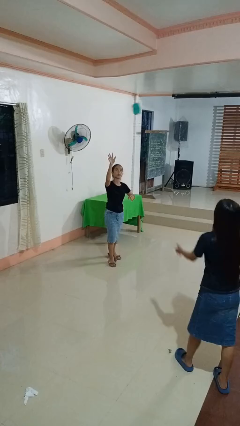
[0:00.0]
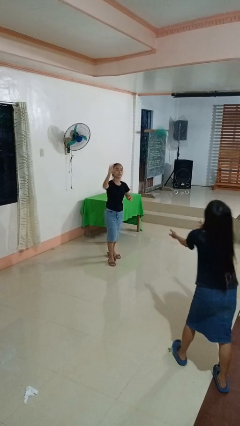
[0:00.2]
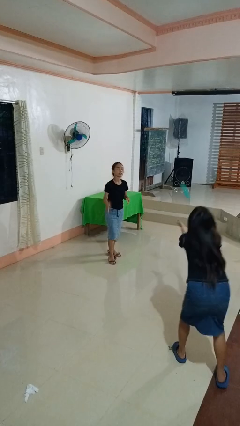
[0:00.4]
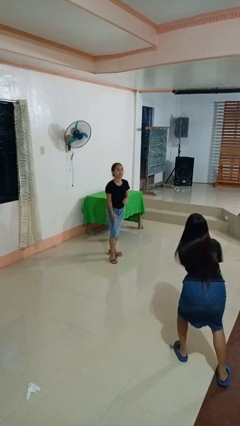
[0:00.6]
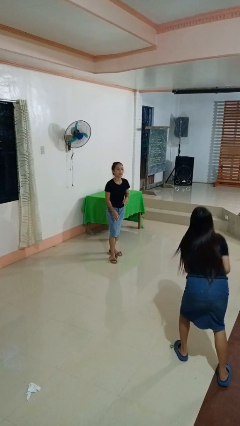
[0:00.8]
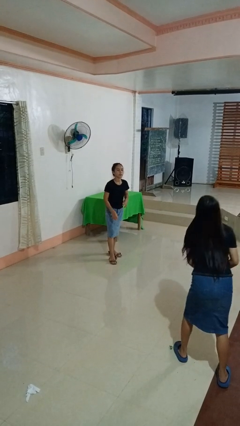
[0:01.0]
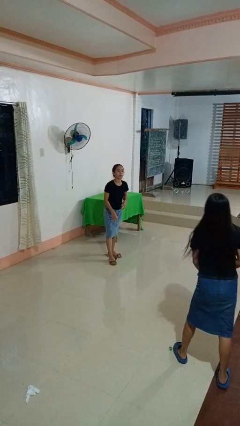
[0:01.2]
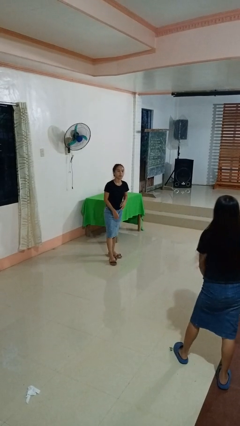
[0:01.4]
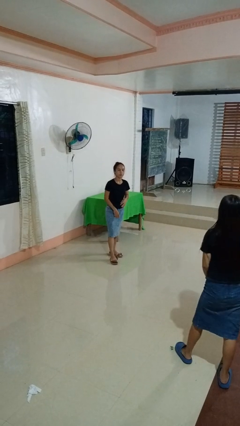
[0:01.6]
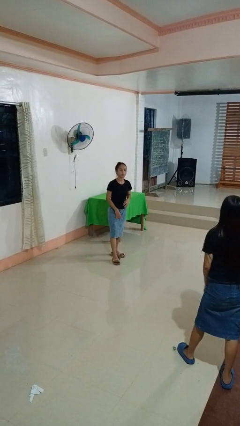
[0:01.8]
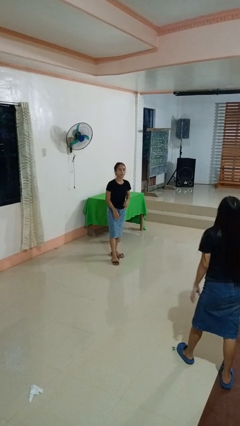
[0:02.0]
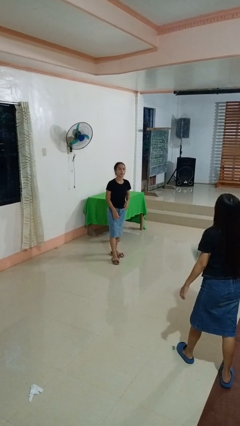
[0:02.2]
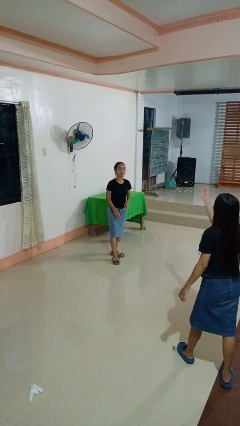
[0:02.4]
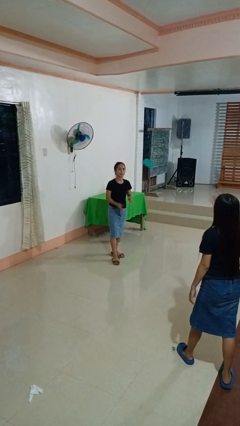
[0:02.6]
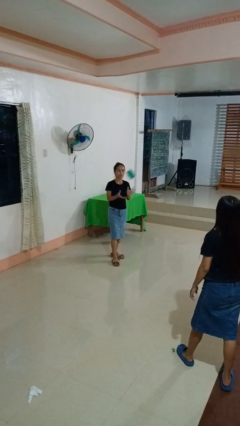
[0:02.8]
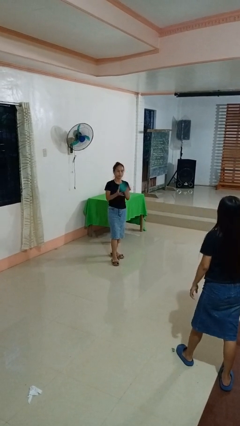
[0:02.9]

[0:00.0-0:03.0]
person throws object to person

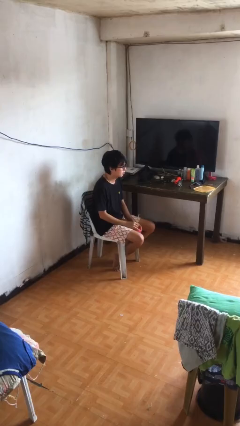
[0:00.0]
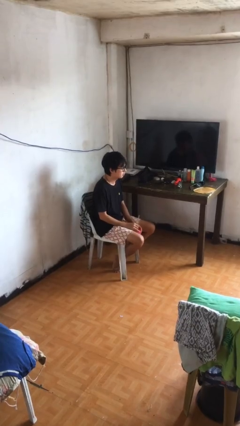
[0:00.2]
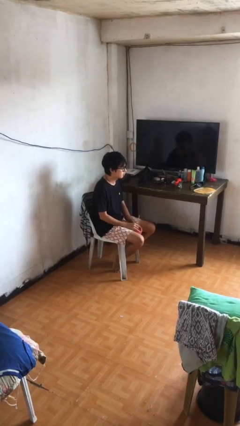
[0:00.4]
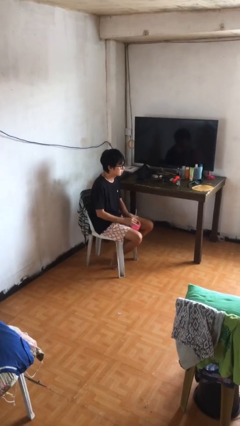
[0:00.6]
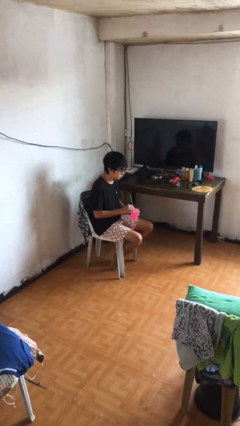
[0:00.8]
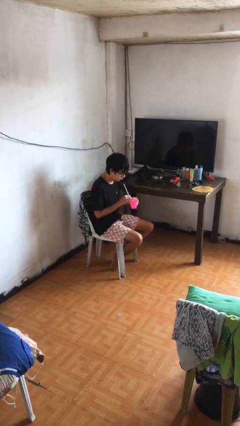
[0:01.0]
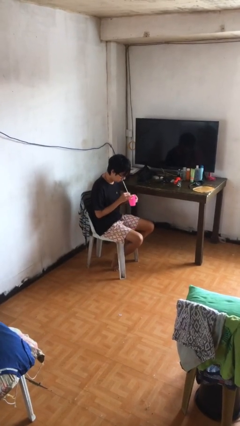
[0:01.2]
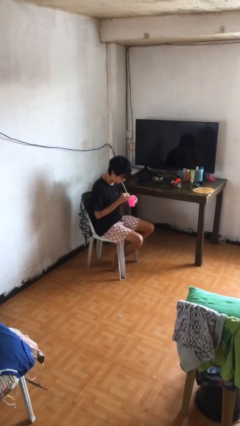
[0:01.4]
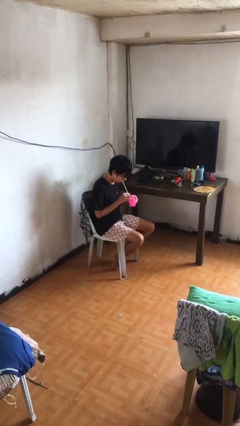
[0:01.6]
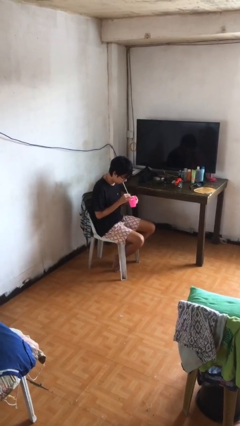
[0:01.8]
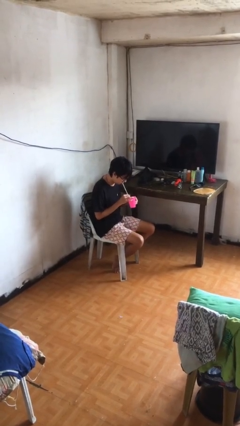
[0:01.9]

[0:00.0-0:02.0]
person drinks from straw

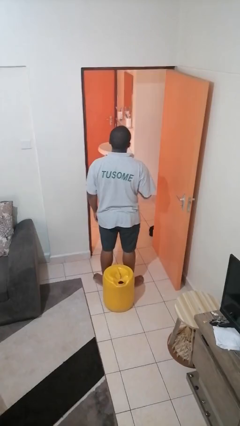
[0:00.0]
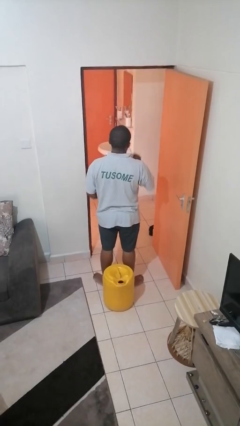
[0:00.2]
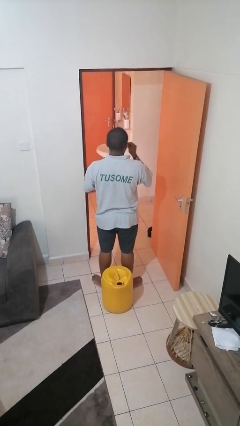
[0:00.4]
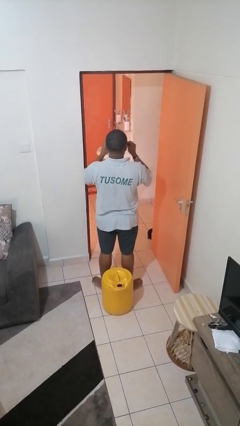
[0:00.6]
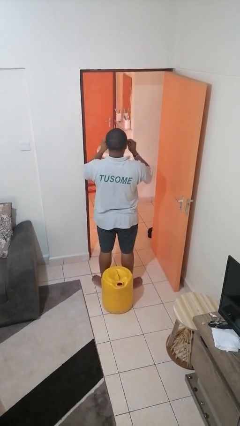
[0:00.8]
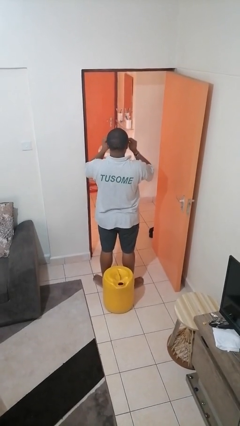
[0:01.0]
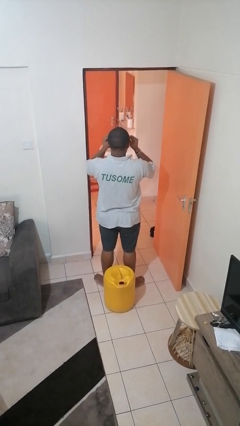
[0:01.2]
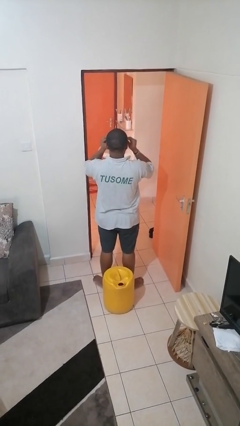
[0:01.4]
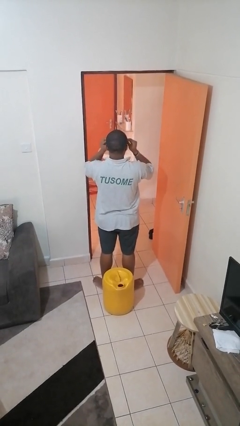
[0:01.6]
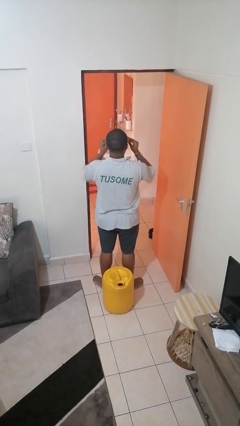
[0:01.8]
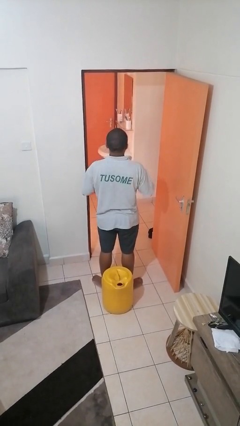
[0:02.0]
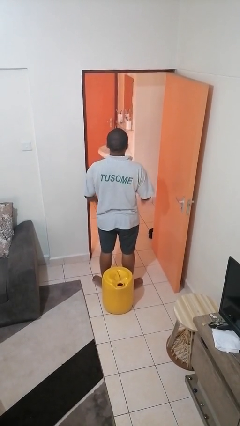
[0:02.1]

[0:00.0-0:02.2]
person puts on glasses

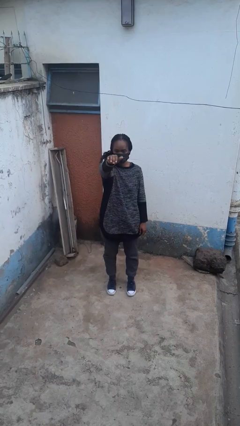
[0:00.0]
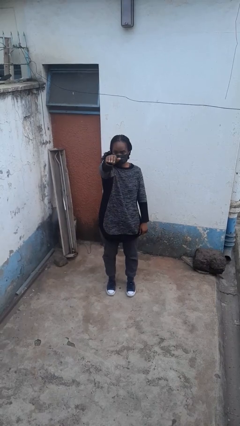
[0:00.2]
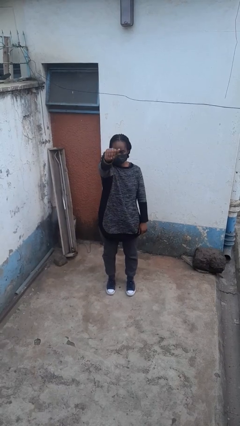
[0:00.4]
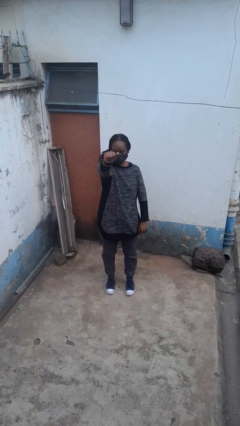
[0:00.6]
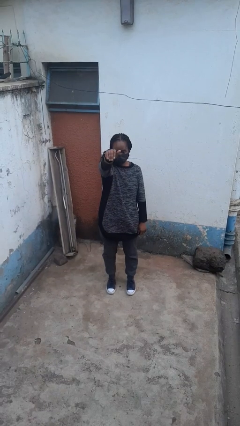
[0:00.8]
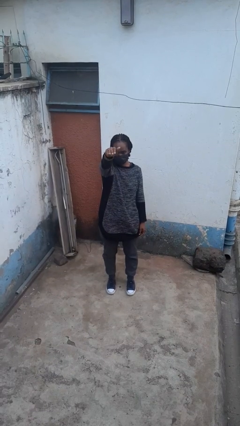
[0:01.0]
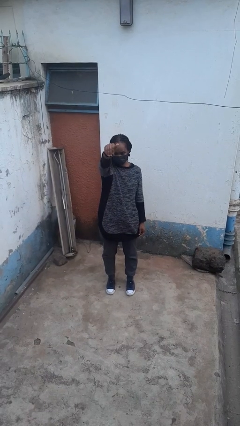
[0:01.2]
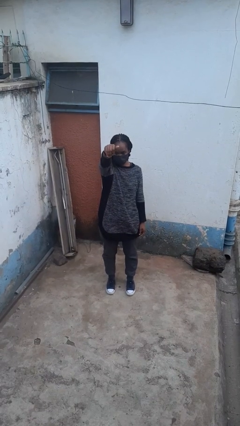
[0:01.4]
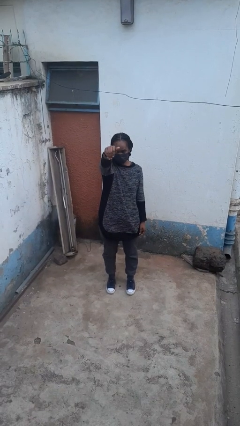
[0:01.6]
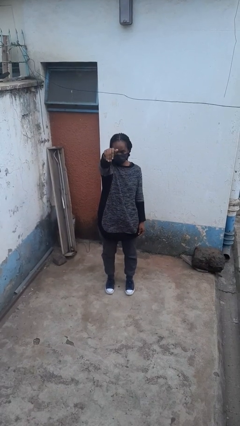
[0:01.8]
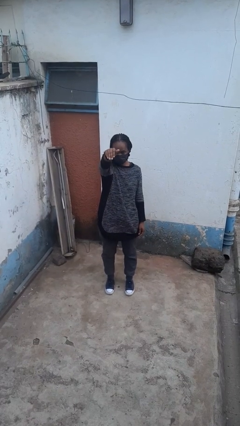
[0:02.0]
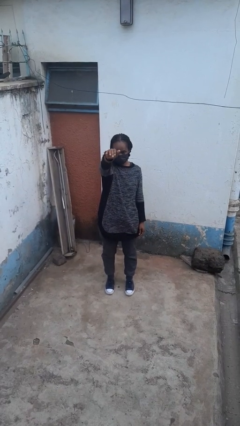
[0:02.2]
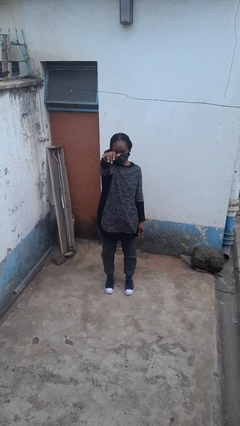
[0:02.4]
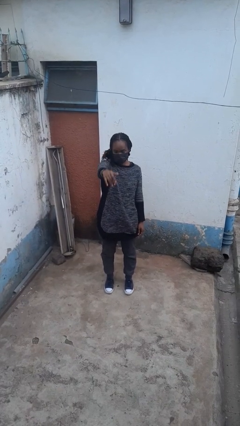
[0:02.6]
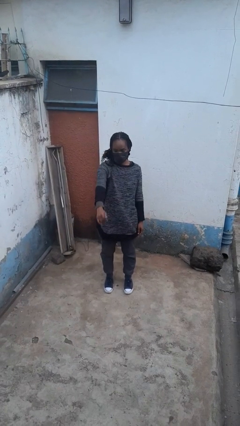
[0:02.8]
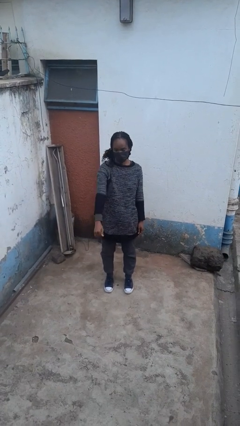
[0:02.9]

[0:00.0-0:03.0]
person gestures come here

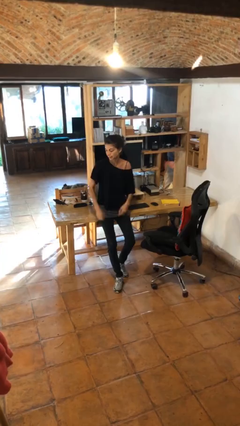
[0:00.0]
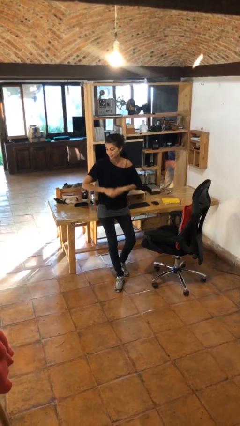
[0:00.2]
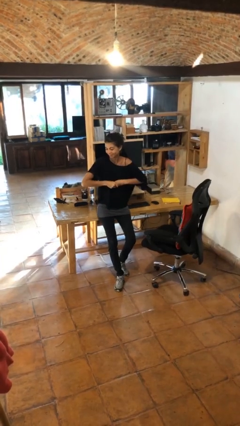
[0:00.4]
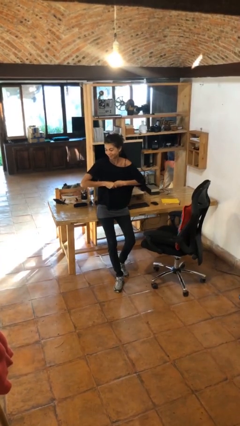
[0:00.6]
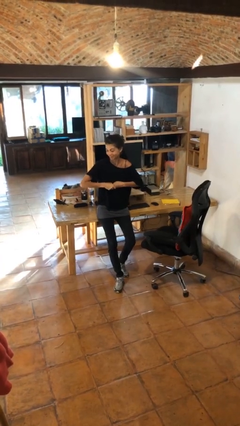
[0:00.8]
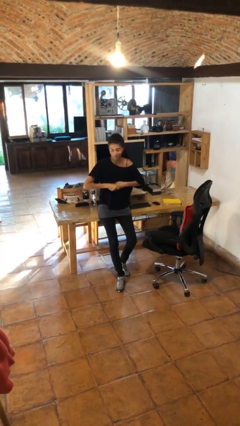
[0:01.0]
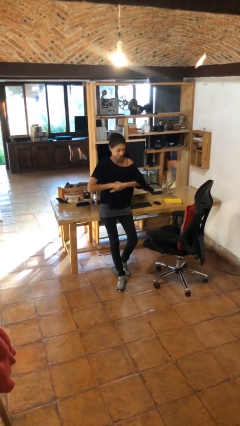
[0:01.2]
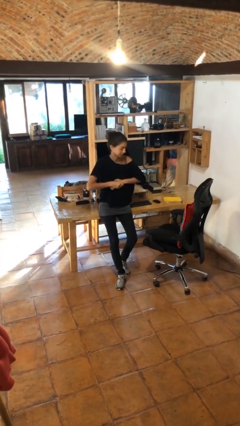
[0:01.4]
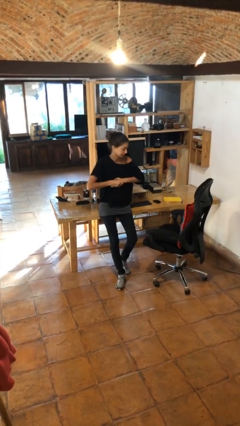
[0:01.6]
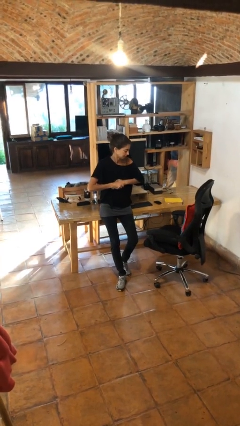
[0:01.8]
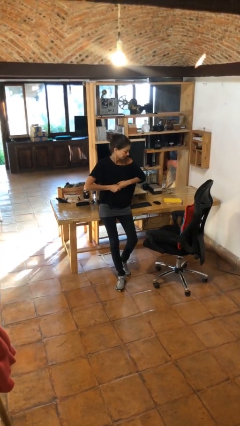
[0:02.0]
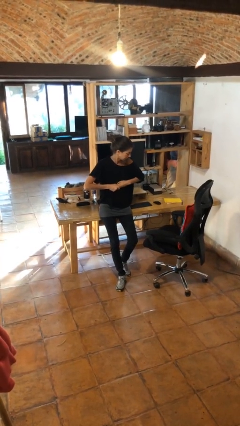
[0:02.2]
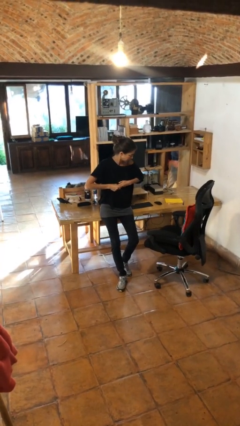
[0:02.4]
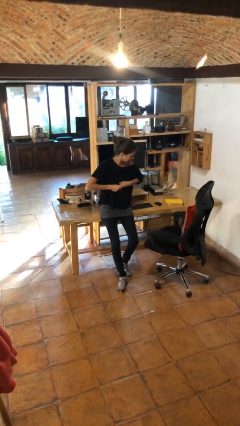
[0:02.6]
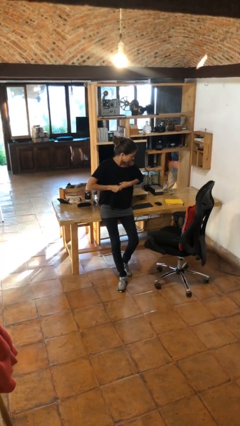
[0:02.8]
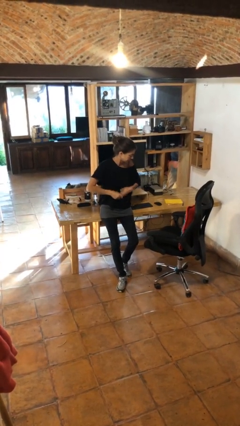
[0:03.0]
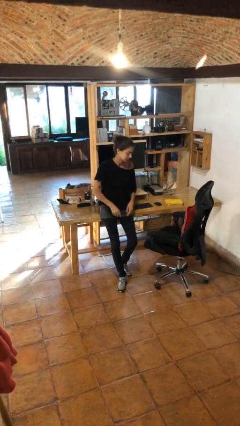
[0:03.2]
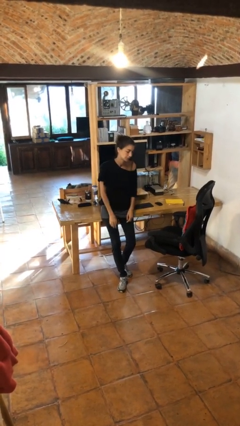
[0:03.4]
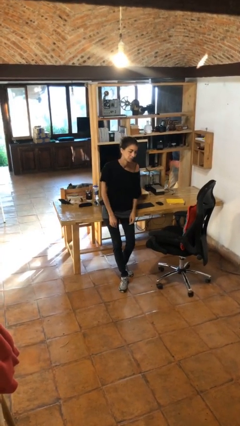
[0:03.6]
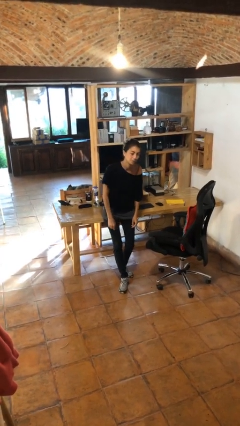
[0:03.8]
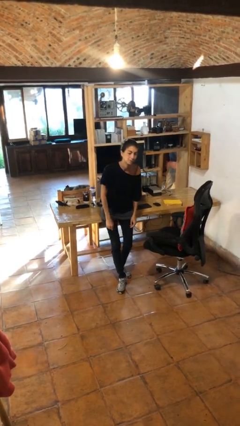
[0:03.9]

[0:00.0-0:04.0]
person cracks knuckles

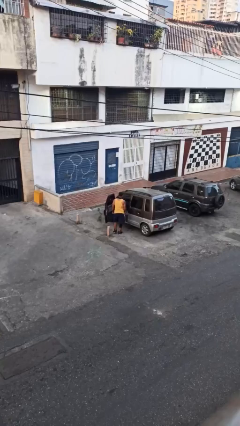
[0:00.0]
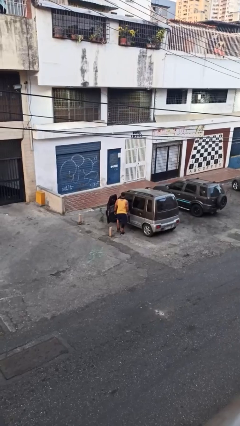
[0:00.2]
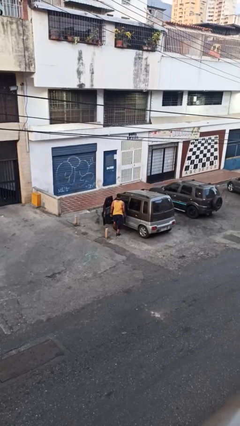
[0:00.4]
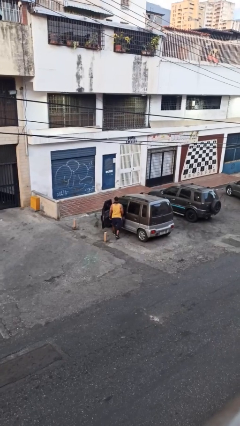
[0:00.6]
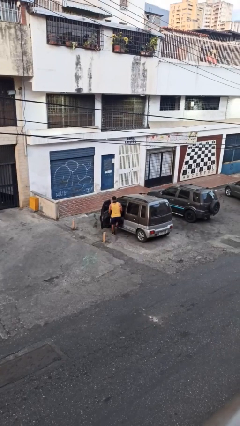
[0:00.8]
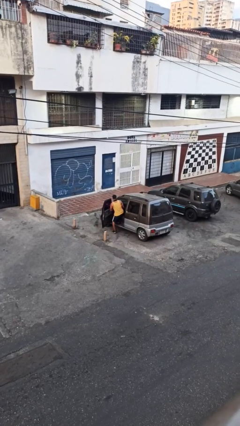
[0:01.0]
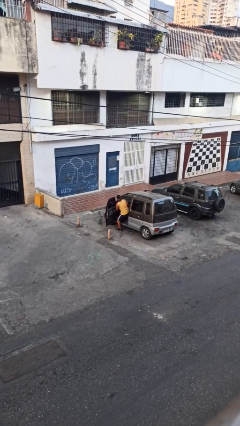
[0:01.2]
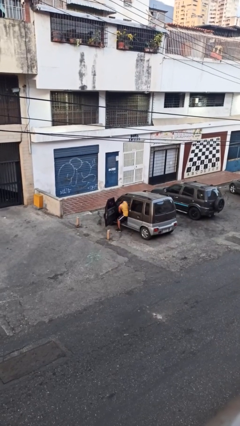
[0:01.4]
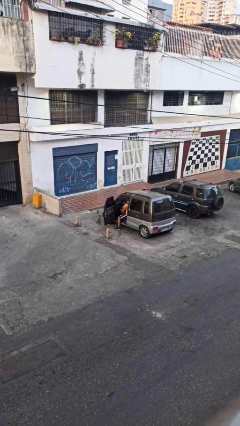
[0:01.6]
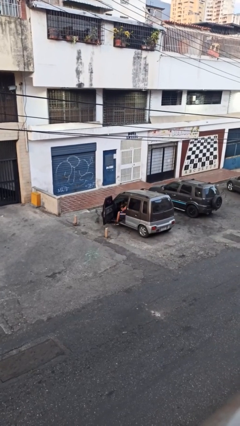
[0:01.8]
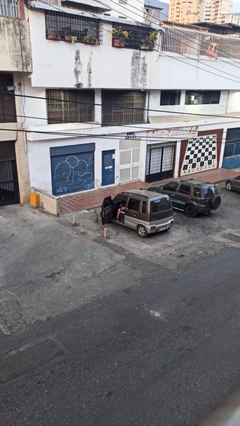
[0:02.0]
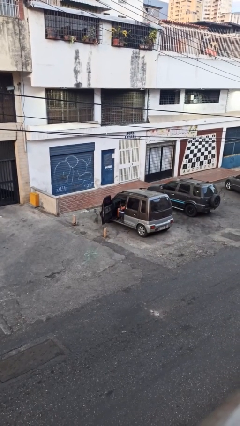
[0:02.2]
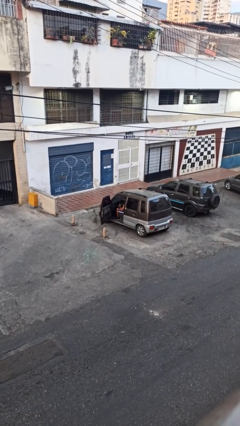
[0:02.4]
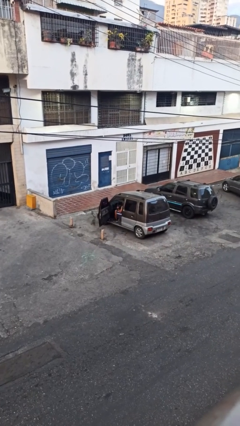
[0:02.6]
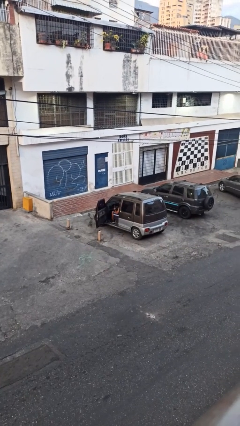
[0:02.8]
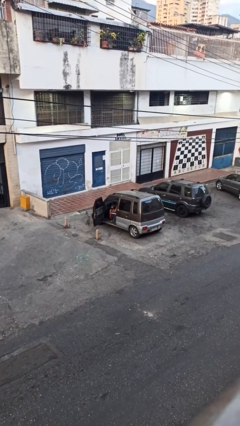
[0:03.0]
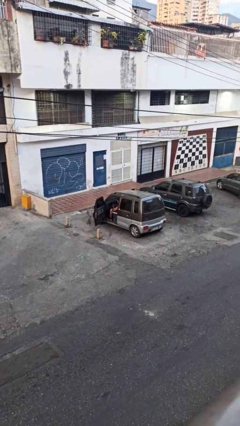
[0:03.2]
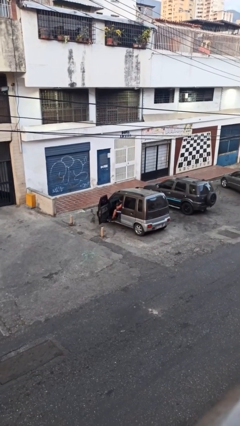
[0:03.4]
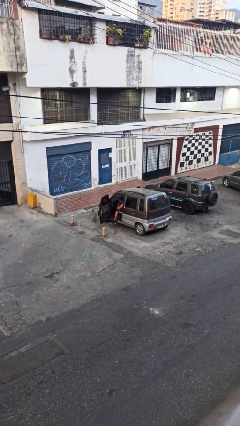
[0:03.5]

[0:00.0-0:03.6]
person enters car
